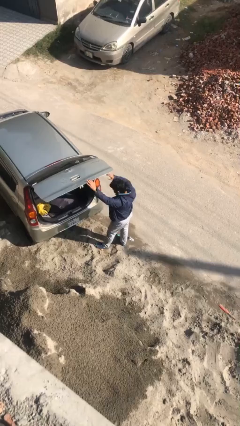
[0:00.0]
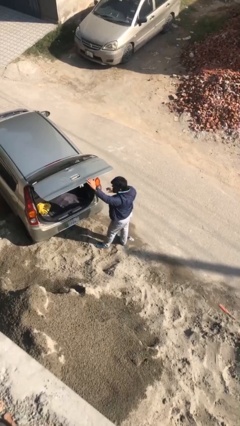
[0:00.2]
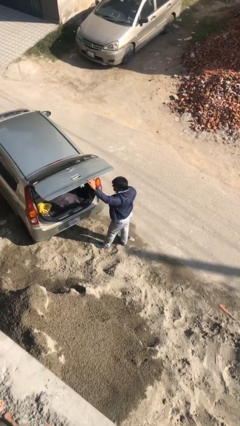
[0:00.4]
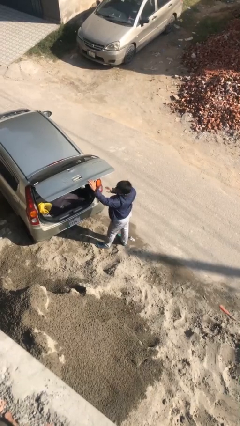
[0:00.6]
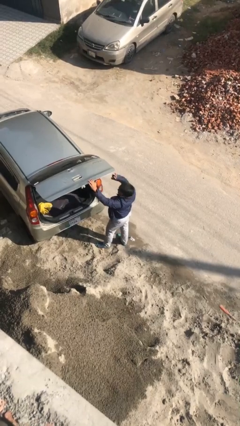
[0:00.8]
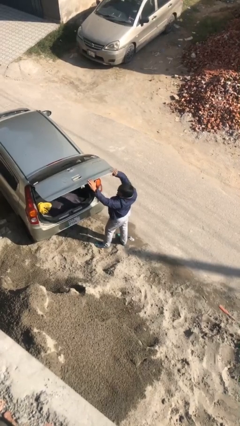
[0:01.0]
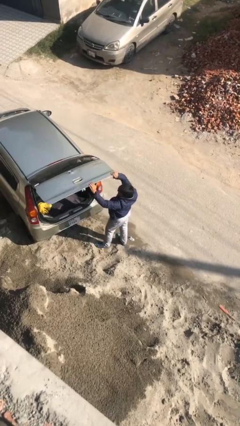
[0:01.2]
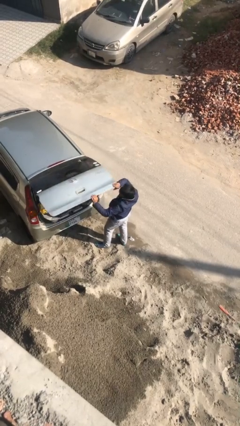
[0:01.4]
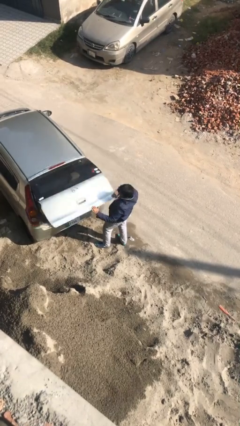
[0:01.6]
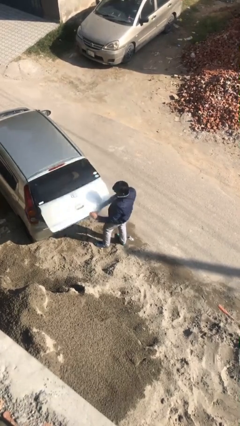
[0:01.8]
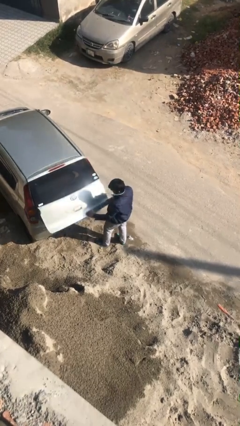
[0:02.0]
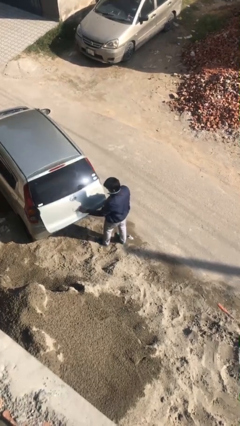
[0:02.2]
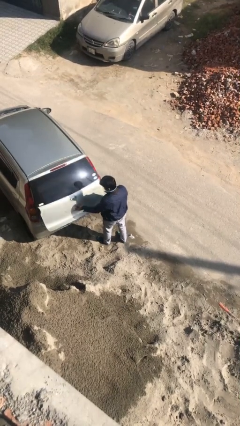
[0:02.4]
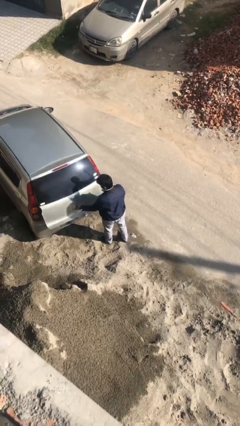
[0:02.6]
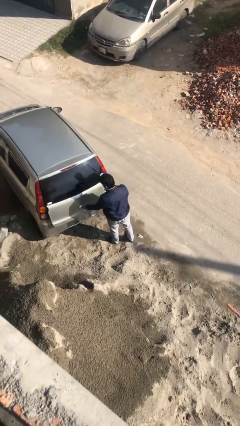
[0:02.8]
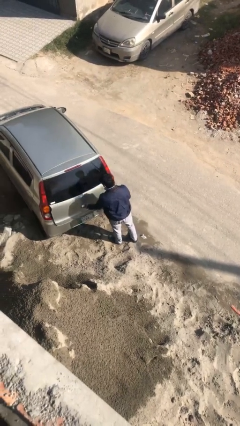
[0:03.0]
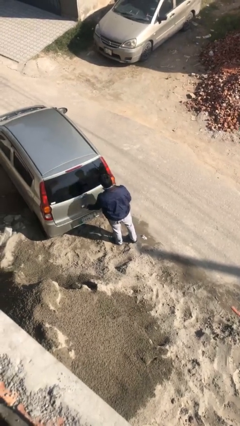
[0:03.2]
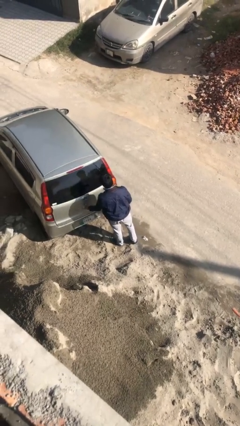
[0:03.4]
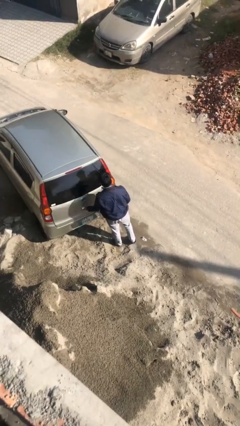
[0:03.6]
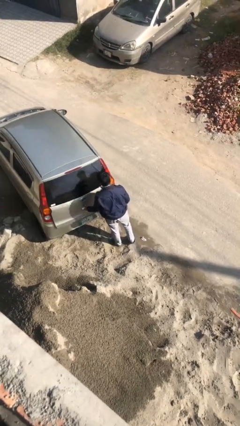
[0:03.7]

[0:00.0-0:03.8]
person closes car trunk

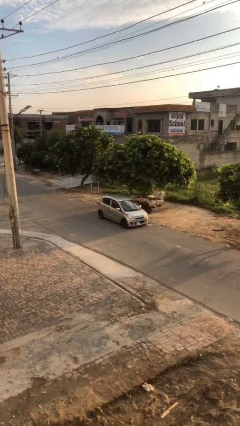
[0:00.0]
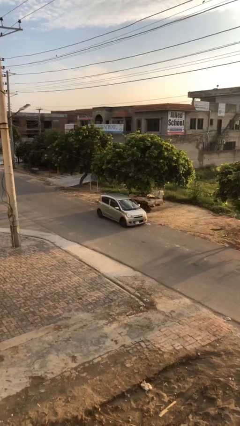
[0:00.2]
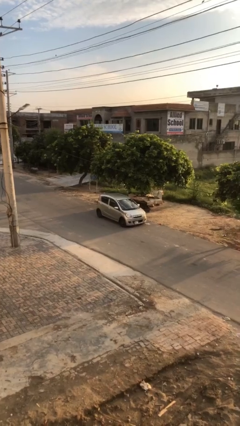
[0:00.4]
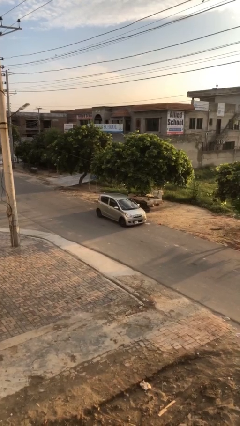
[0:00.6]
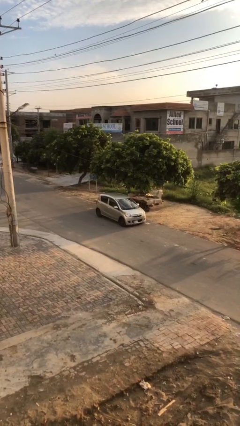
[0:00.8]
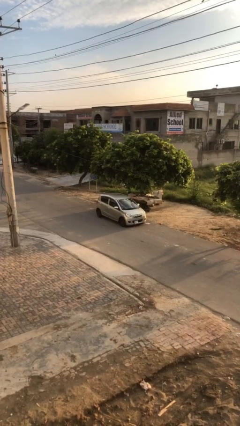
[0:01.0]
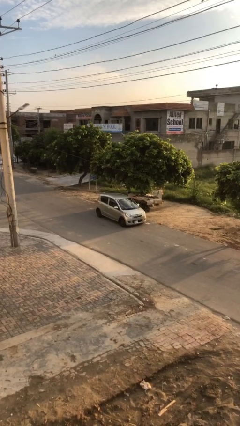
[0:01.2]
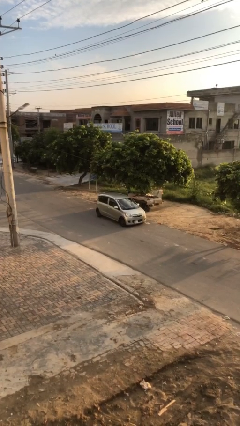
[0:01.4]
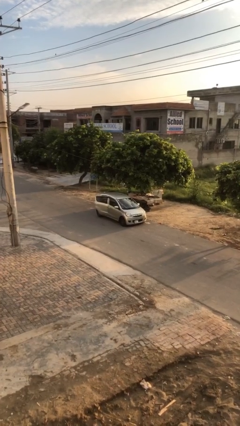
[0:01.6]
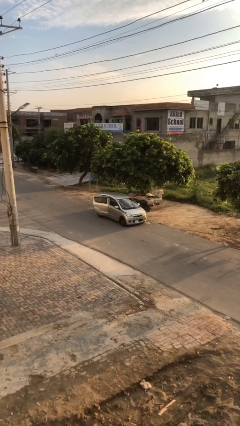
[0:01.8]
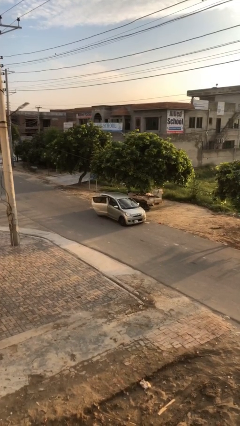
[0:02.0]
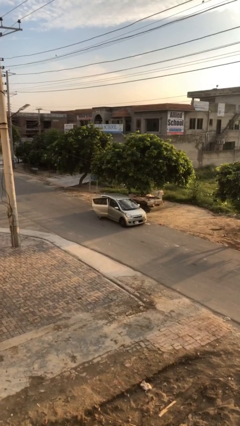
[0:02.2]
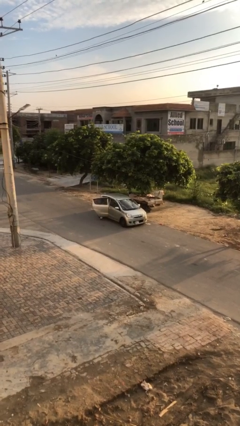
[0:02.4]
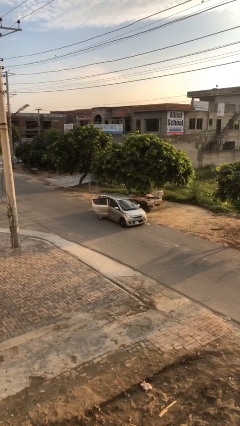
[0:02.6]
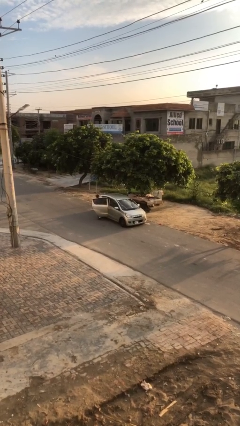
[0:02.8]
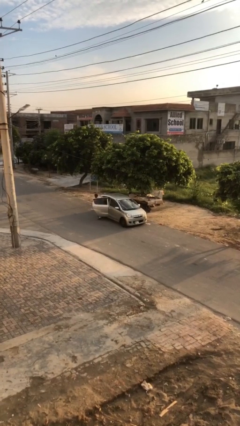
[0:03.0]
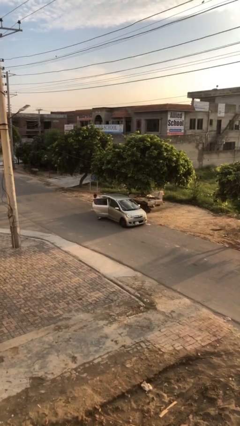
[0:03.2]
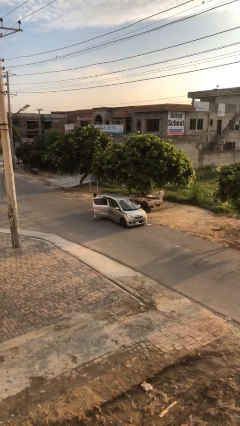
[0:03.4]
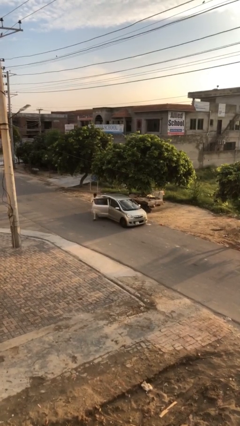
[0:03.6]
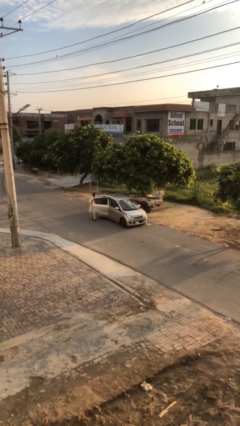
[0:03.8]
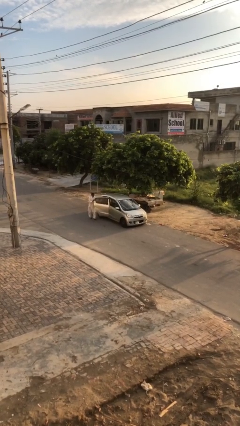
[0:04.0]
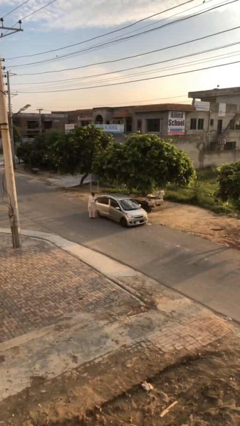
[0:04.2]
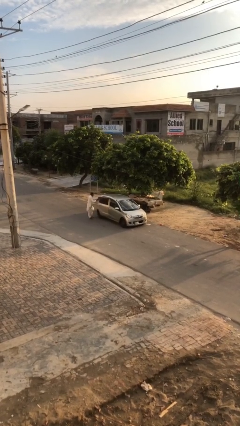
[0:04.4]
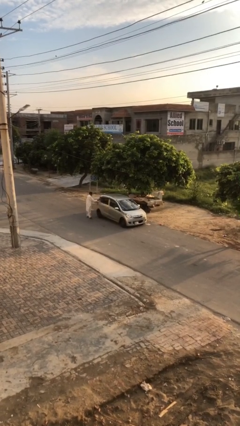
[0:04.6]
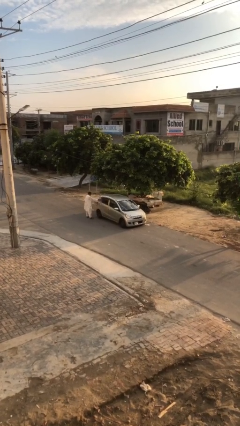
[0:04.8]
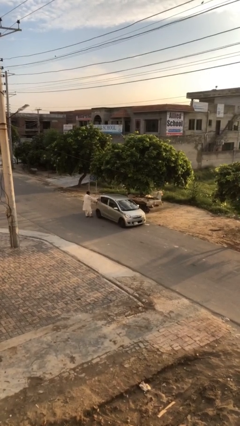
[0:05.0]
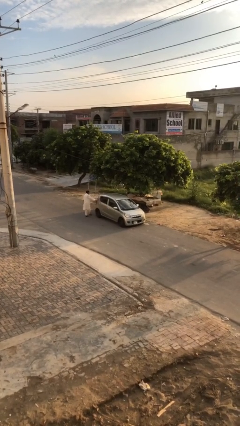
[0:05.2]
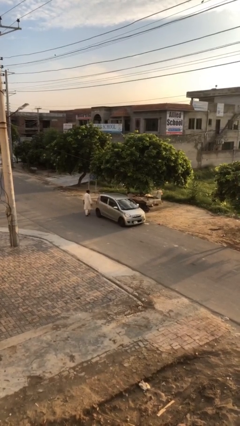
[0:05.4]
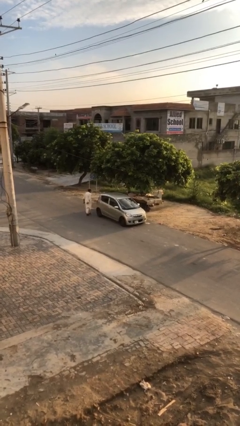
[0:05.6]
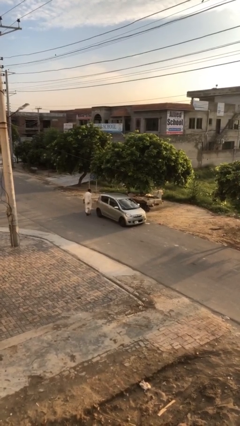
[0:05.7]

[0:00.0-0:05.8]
car drops off person

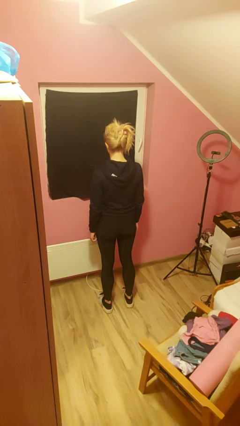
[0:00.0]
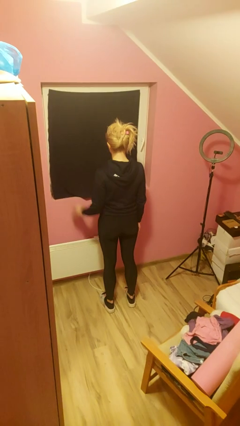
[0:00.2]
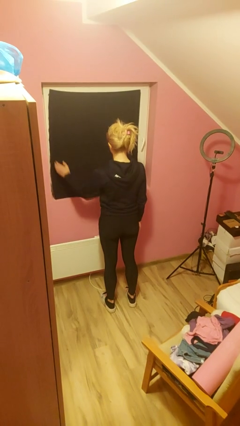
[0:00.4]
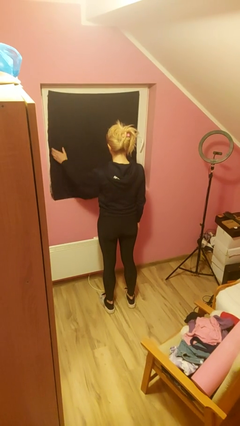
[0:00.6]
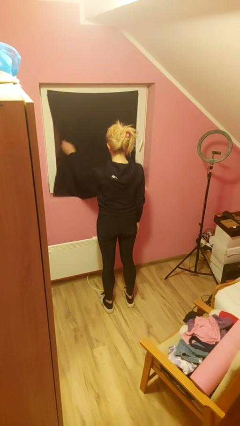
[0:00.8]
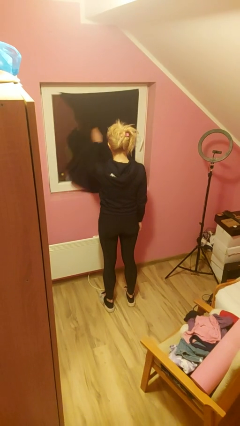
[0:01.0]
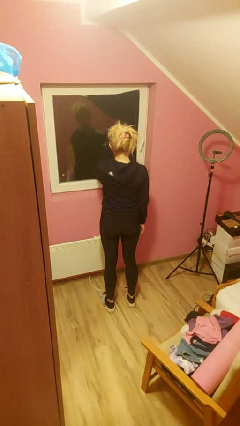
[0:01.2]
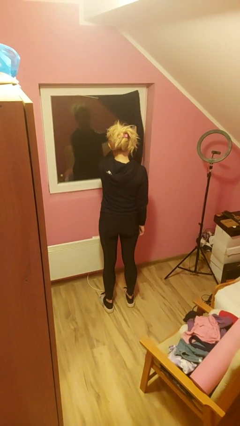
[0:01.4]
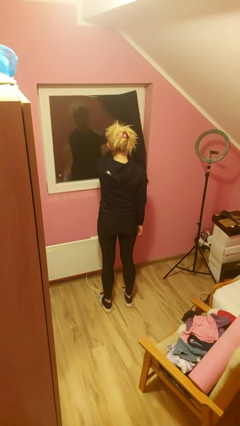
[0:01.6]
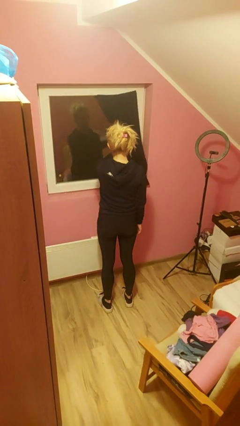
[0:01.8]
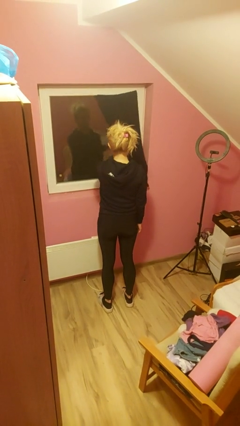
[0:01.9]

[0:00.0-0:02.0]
person opens curtains

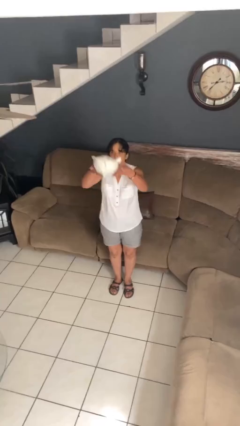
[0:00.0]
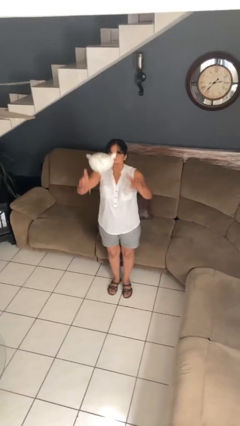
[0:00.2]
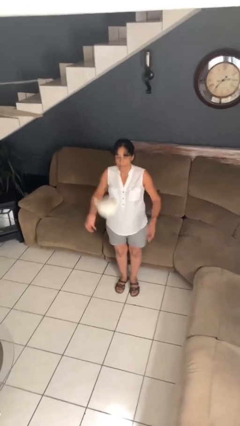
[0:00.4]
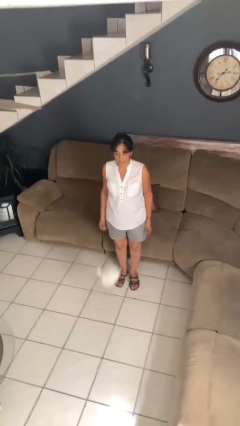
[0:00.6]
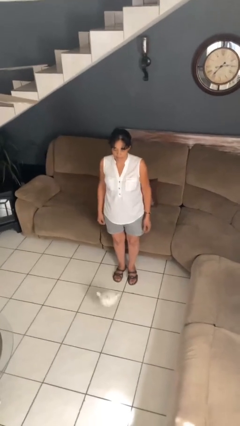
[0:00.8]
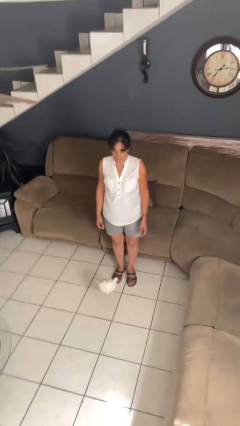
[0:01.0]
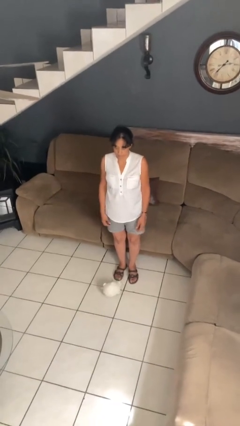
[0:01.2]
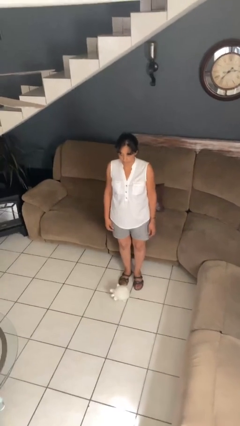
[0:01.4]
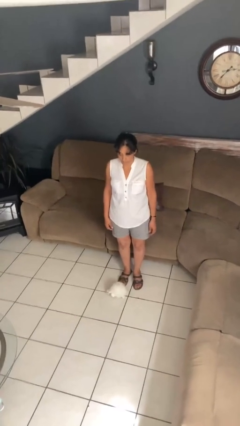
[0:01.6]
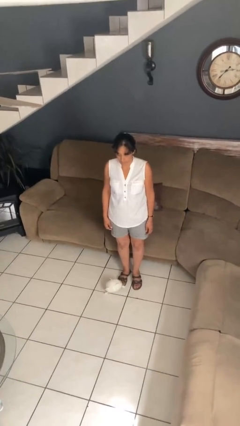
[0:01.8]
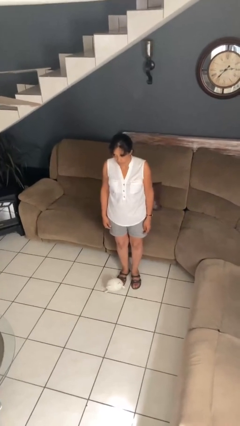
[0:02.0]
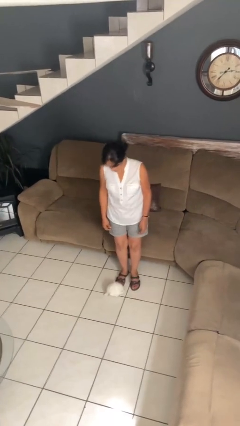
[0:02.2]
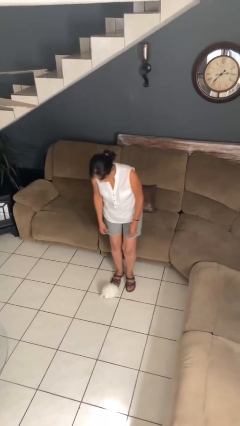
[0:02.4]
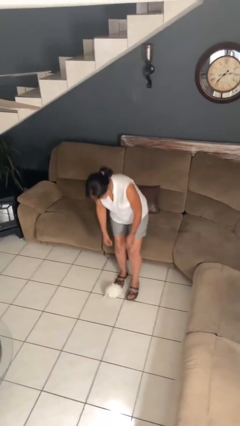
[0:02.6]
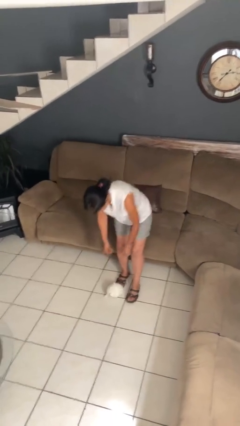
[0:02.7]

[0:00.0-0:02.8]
person throws object into air

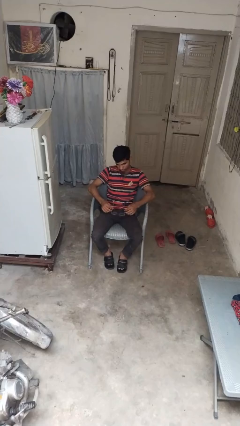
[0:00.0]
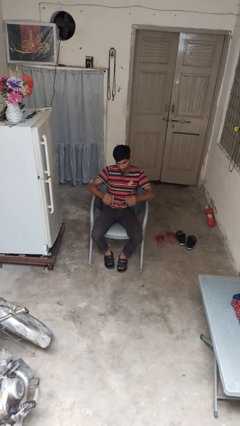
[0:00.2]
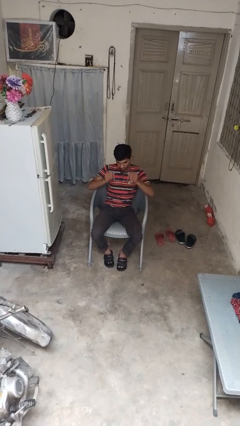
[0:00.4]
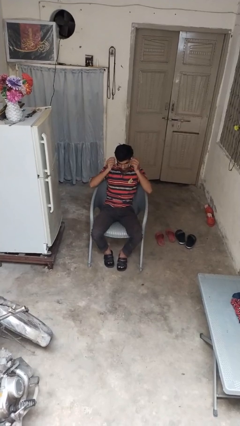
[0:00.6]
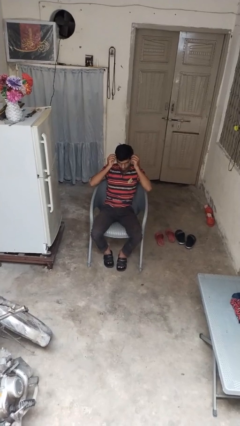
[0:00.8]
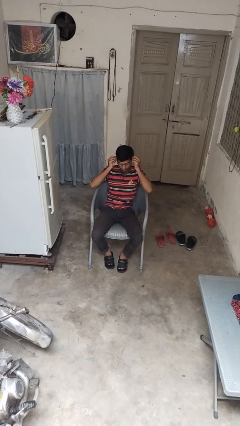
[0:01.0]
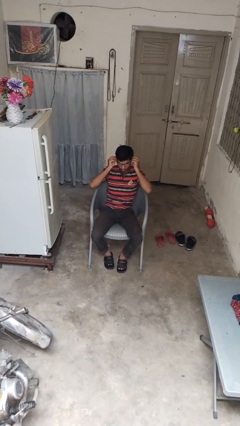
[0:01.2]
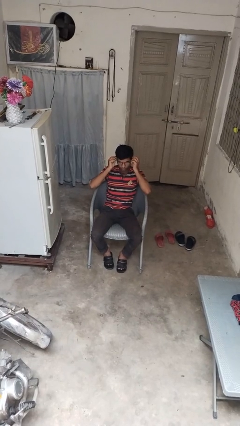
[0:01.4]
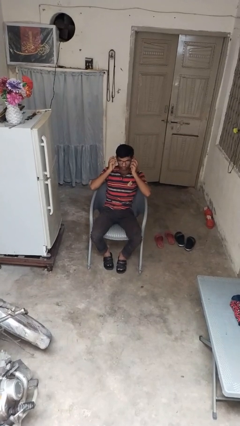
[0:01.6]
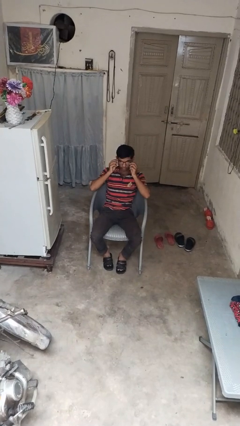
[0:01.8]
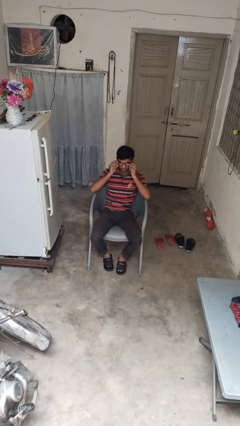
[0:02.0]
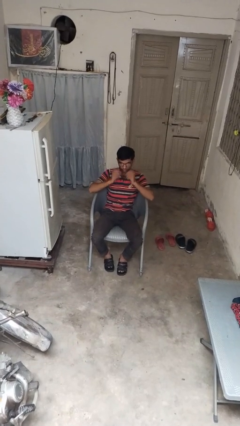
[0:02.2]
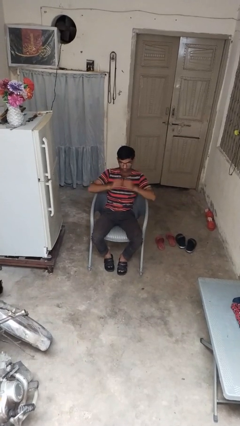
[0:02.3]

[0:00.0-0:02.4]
person puts on glasses

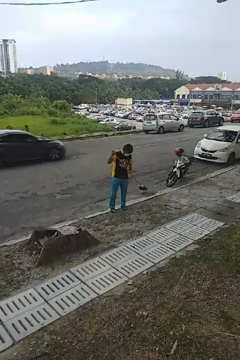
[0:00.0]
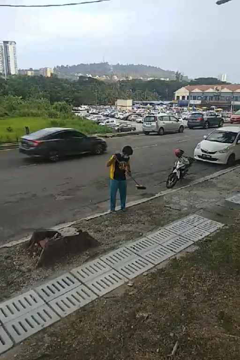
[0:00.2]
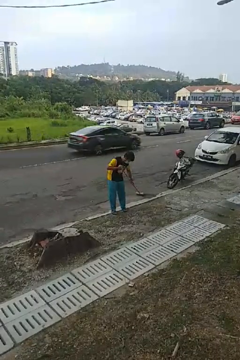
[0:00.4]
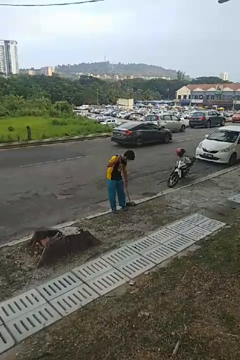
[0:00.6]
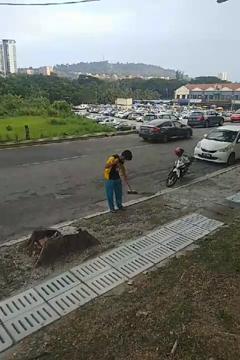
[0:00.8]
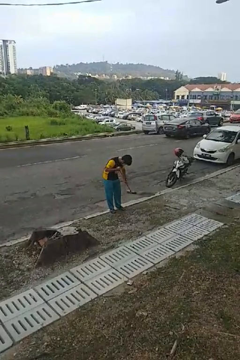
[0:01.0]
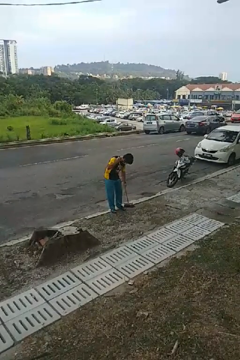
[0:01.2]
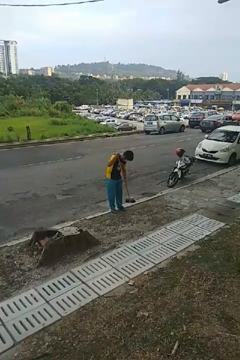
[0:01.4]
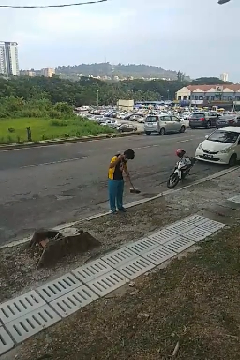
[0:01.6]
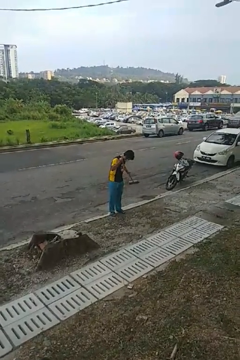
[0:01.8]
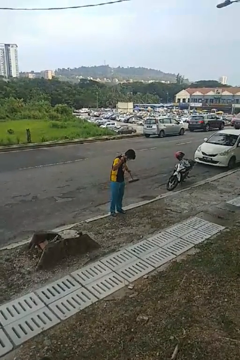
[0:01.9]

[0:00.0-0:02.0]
person sweeps floor
